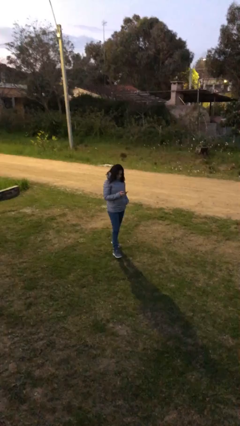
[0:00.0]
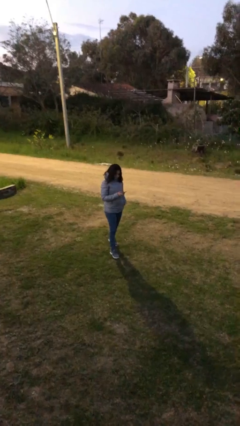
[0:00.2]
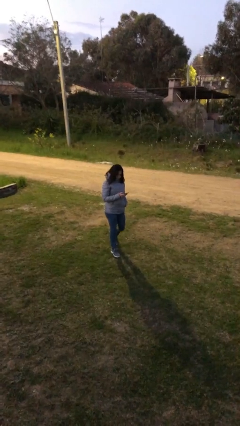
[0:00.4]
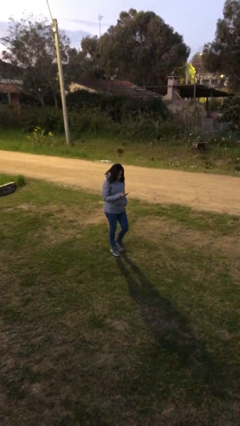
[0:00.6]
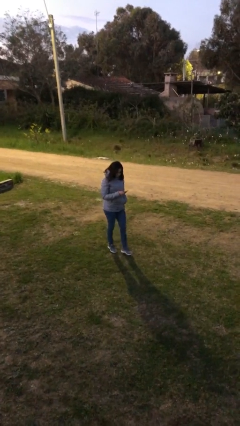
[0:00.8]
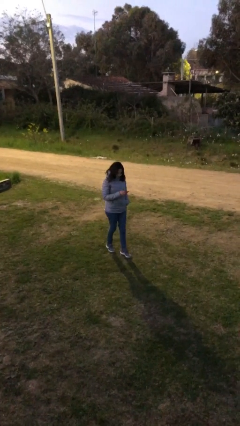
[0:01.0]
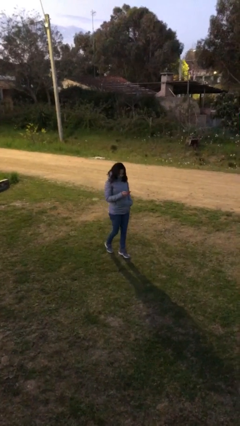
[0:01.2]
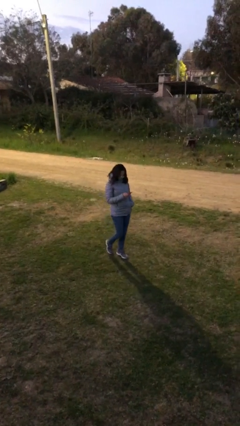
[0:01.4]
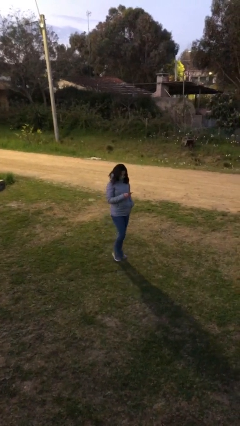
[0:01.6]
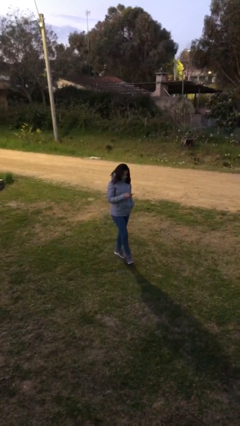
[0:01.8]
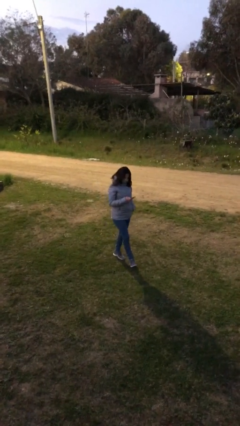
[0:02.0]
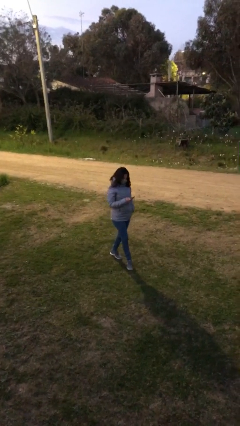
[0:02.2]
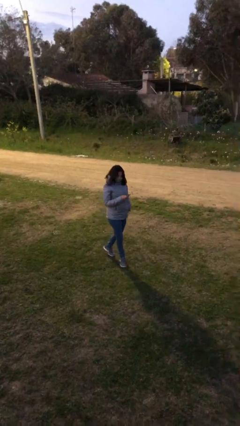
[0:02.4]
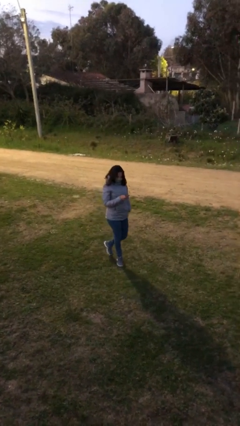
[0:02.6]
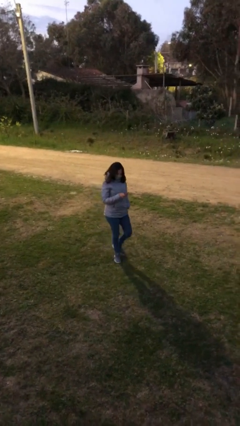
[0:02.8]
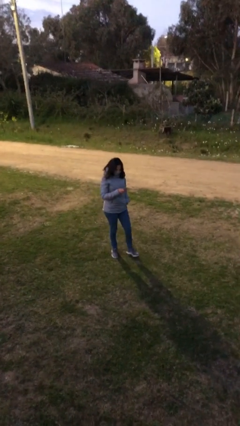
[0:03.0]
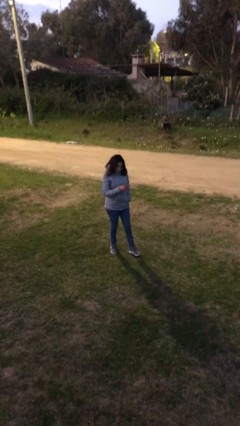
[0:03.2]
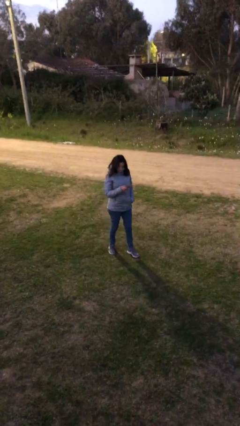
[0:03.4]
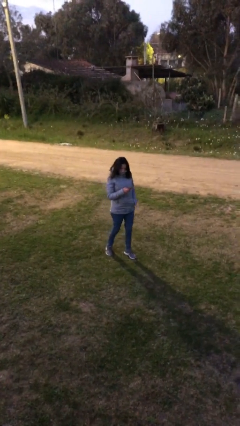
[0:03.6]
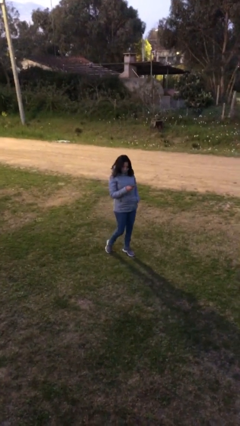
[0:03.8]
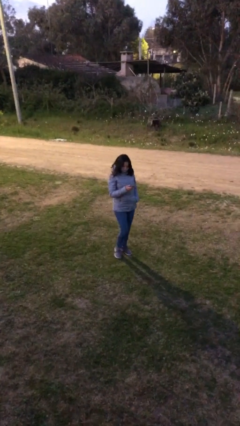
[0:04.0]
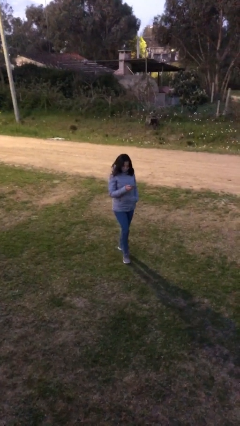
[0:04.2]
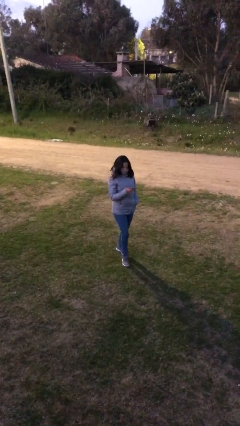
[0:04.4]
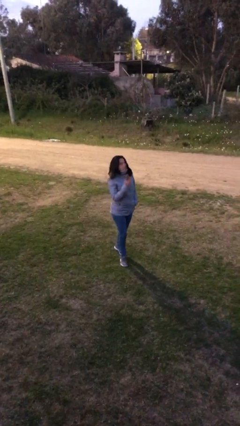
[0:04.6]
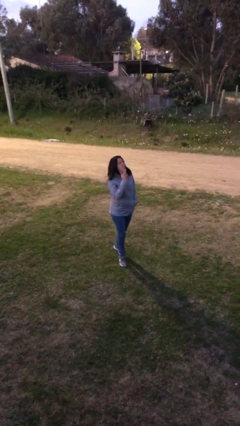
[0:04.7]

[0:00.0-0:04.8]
person texts on phone

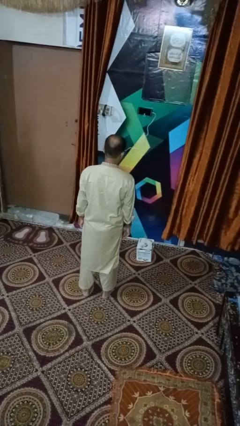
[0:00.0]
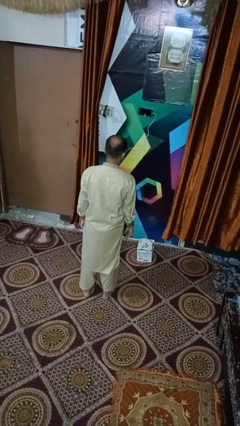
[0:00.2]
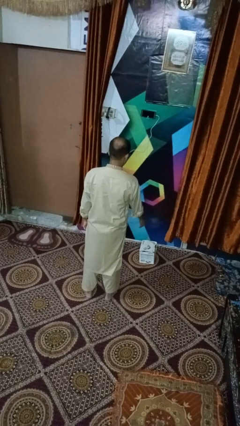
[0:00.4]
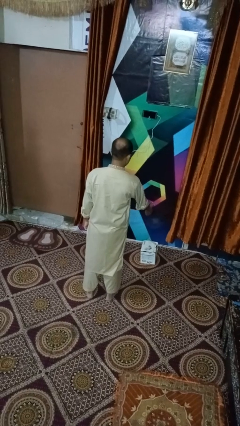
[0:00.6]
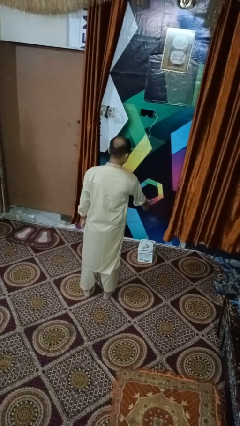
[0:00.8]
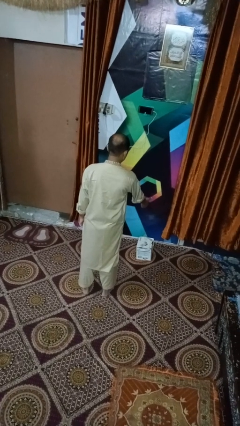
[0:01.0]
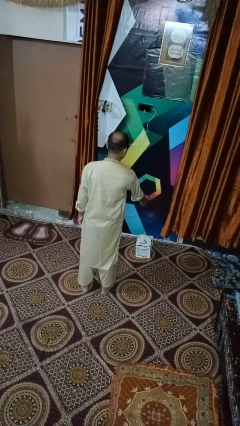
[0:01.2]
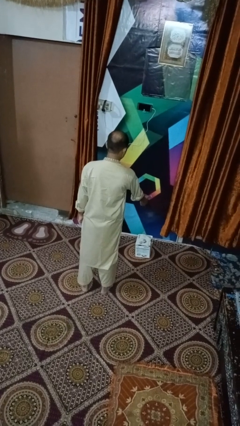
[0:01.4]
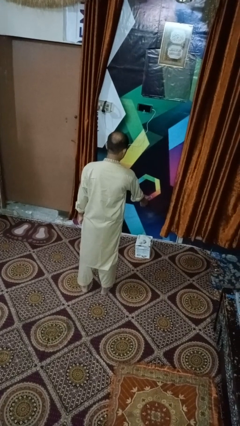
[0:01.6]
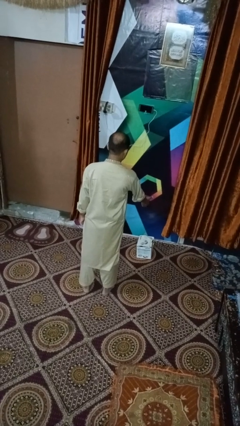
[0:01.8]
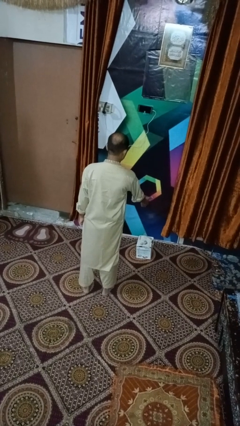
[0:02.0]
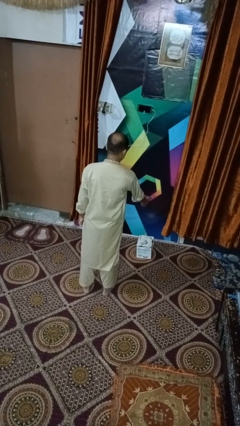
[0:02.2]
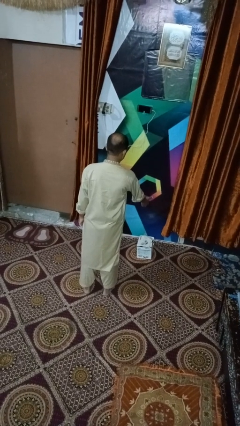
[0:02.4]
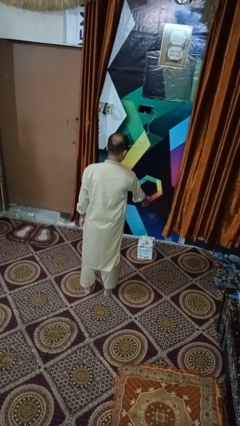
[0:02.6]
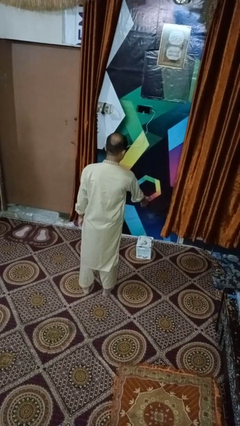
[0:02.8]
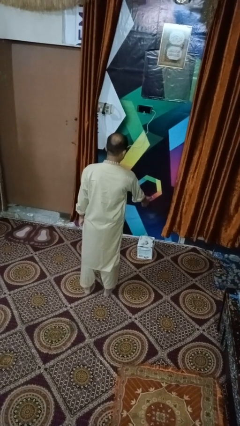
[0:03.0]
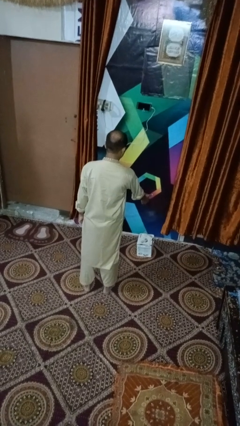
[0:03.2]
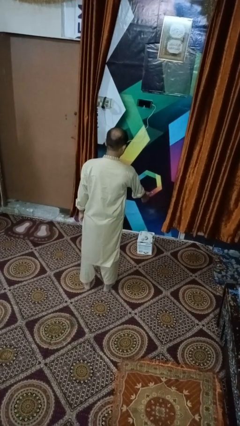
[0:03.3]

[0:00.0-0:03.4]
person waves hand over object

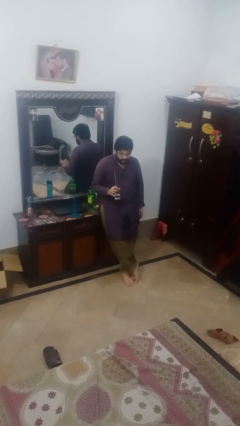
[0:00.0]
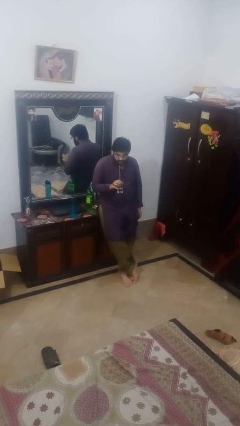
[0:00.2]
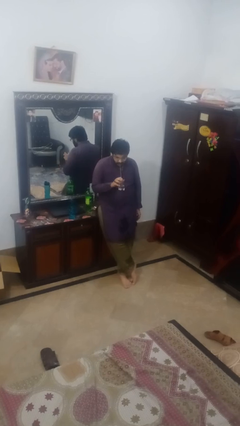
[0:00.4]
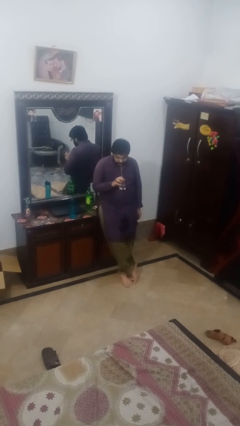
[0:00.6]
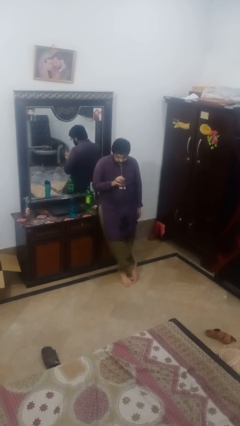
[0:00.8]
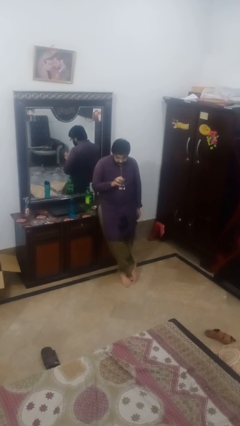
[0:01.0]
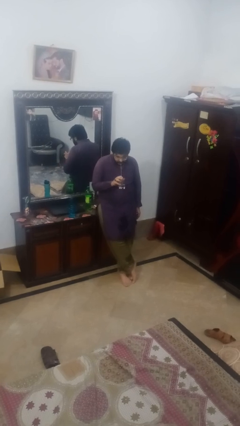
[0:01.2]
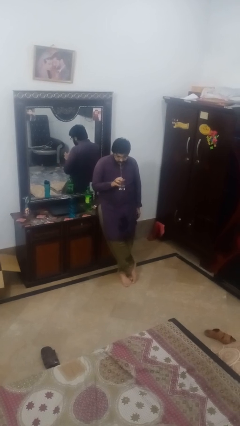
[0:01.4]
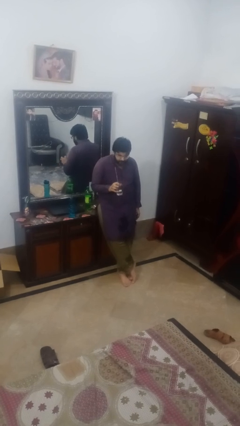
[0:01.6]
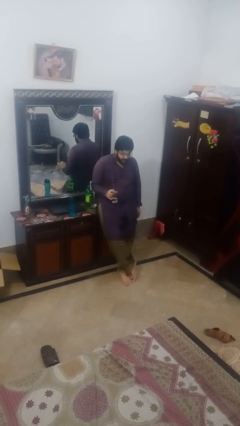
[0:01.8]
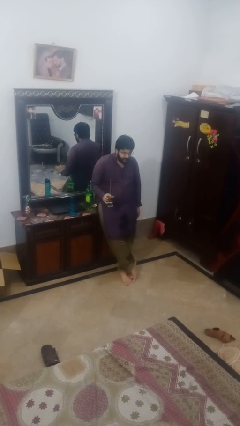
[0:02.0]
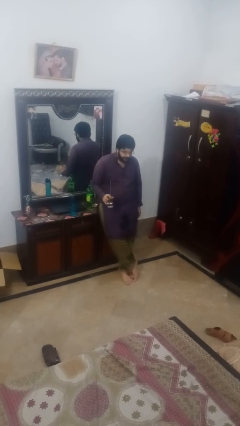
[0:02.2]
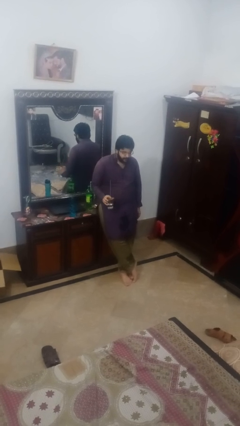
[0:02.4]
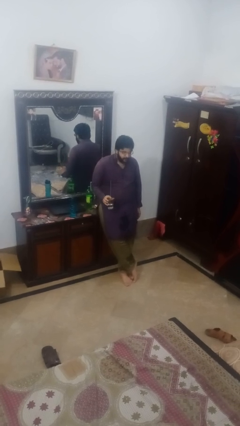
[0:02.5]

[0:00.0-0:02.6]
person drinks from straw

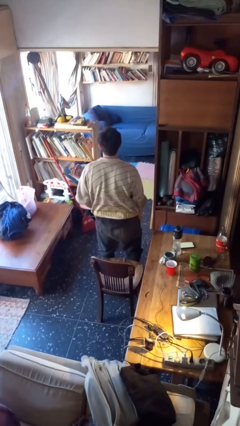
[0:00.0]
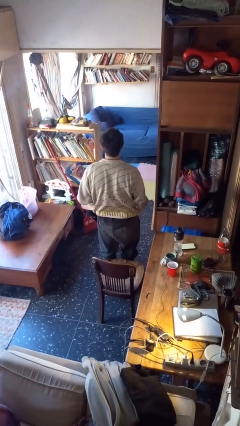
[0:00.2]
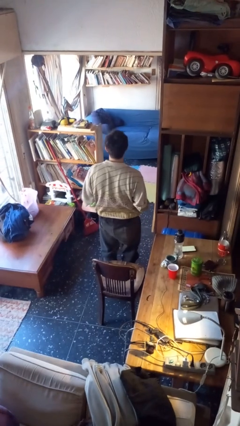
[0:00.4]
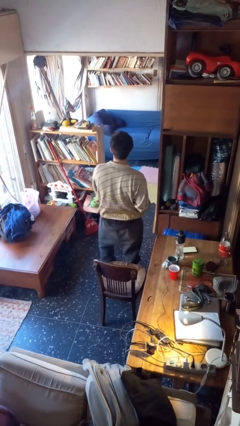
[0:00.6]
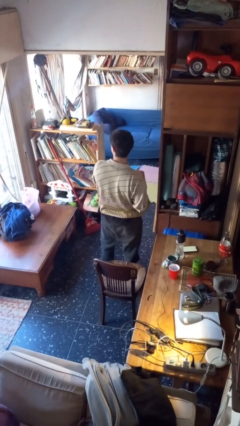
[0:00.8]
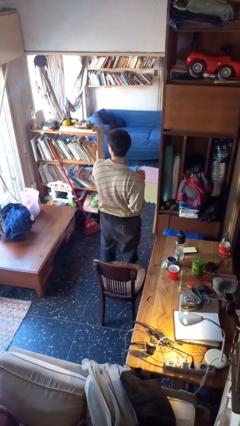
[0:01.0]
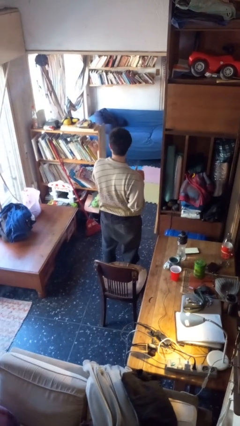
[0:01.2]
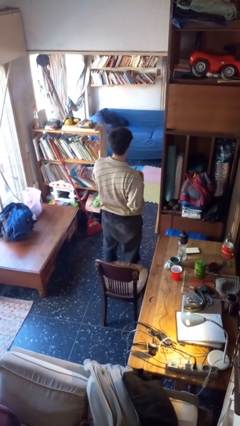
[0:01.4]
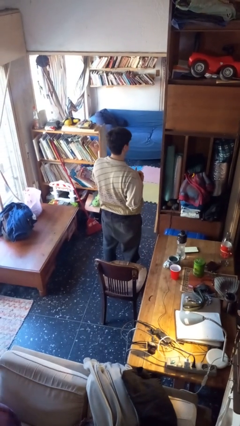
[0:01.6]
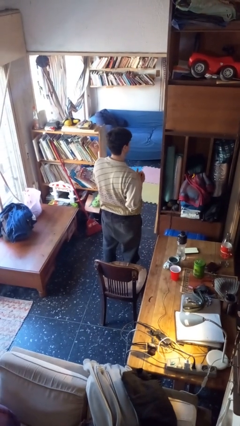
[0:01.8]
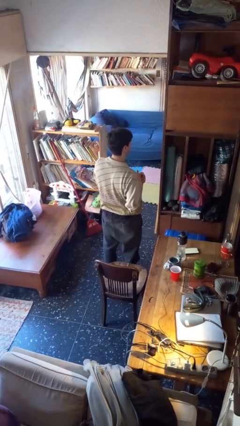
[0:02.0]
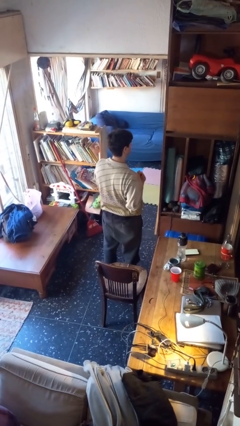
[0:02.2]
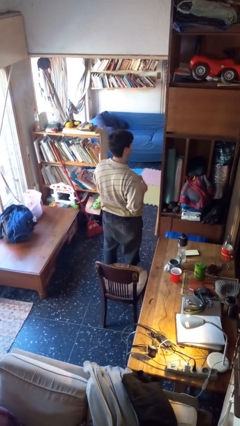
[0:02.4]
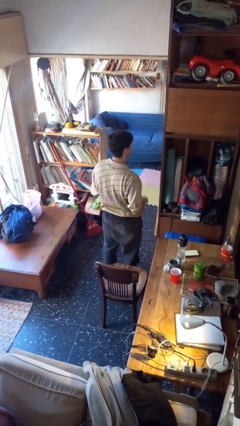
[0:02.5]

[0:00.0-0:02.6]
person snaps fingers

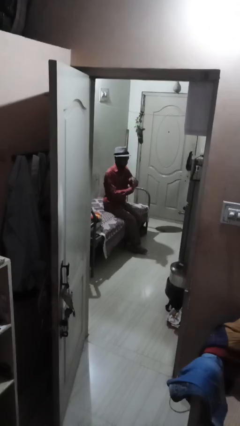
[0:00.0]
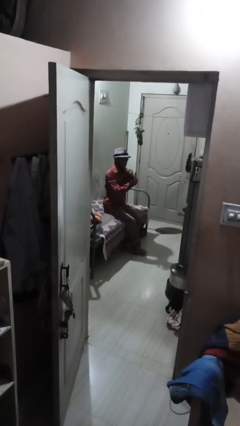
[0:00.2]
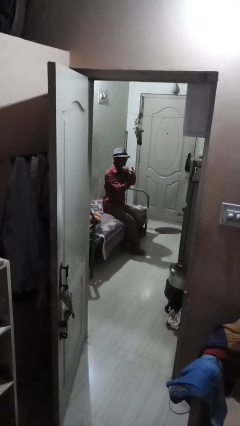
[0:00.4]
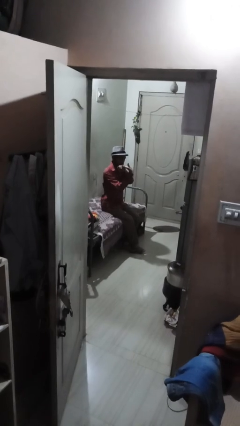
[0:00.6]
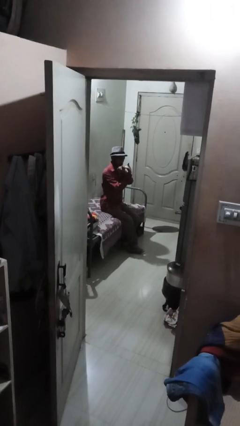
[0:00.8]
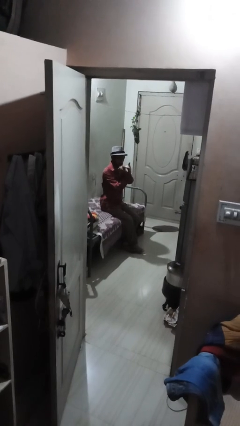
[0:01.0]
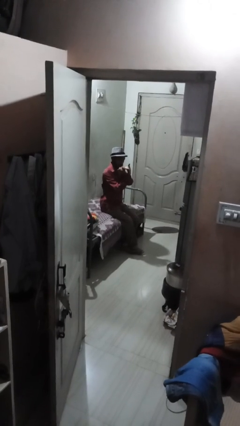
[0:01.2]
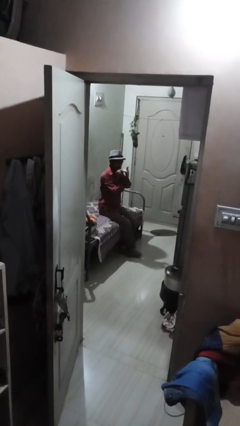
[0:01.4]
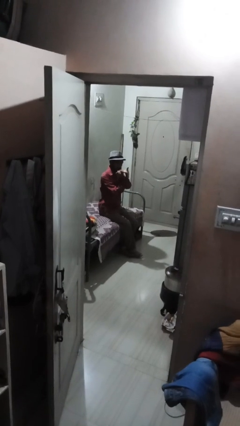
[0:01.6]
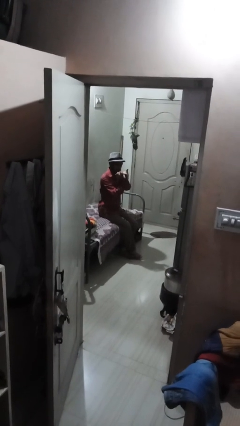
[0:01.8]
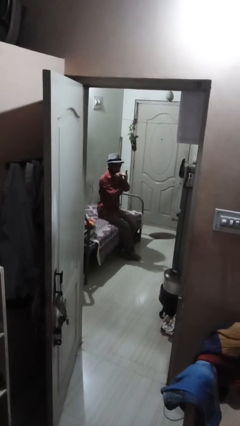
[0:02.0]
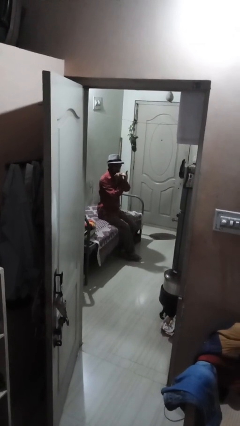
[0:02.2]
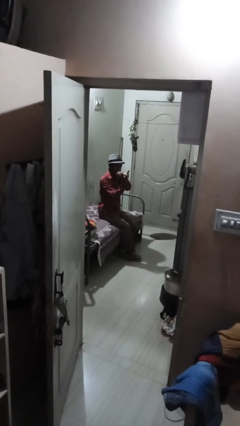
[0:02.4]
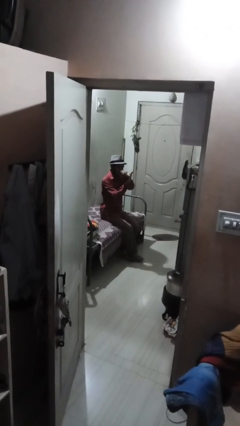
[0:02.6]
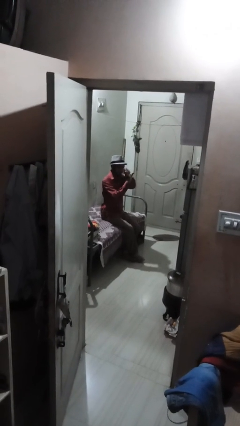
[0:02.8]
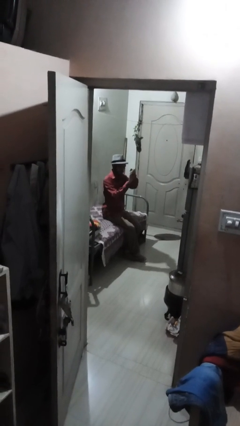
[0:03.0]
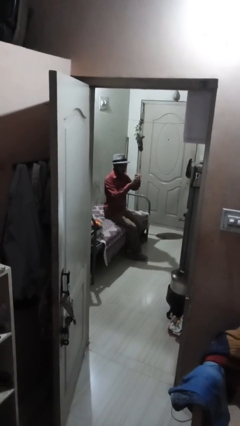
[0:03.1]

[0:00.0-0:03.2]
person cracks knuckles

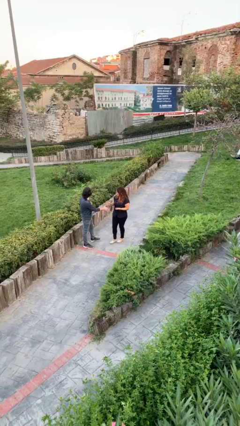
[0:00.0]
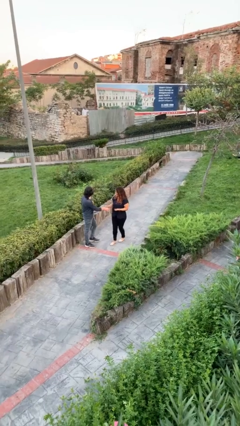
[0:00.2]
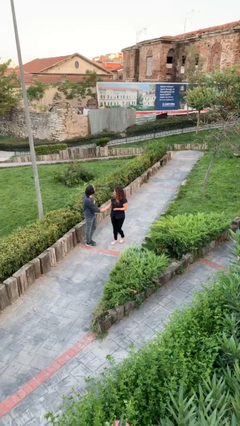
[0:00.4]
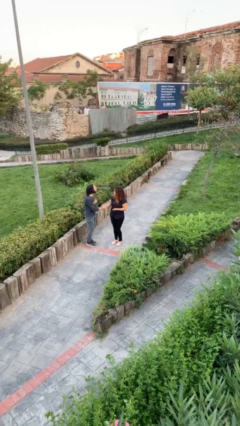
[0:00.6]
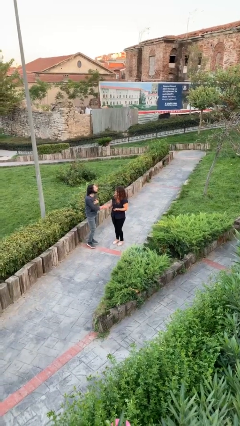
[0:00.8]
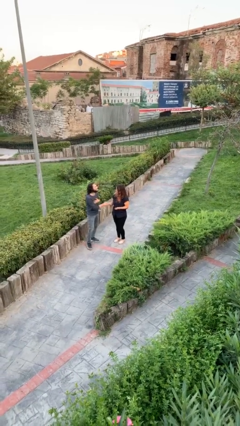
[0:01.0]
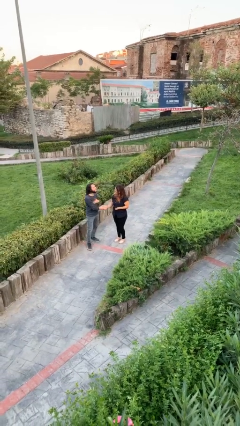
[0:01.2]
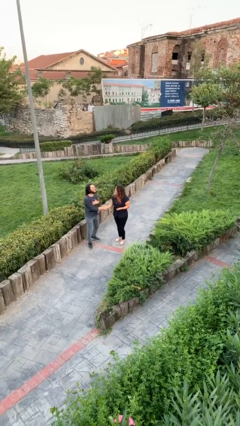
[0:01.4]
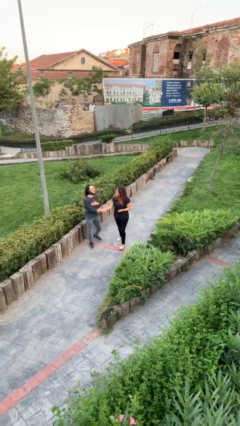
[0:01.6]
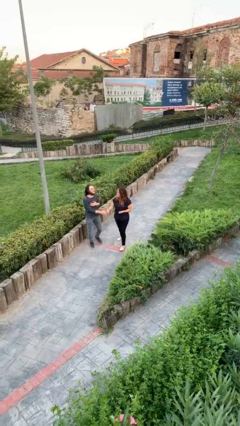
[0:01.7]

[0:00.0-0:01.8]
person shakes hand
